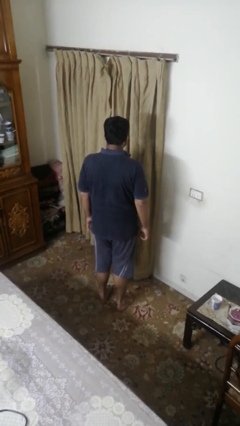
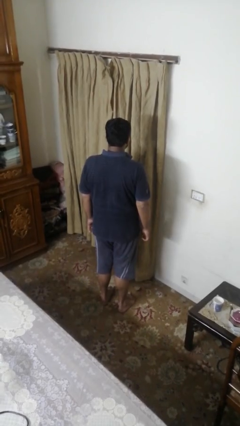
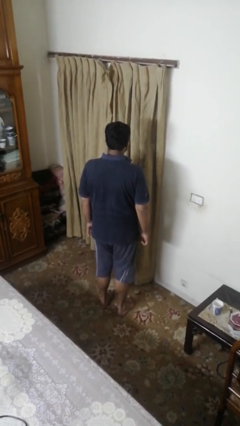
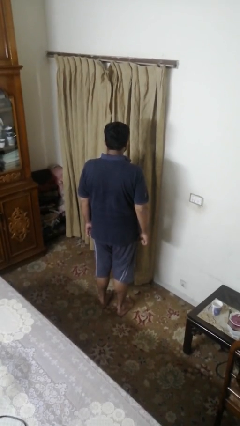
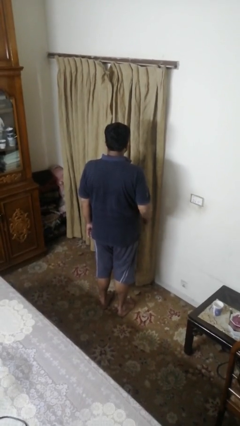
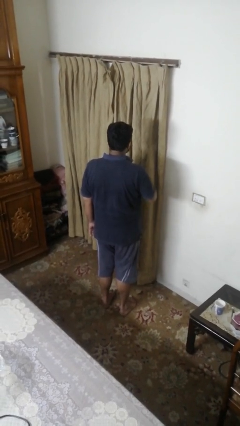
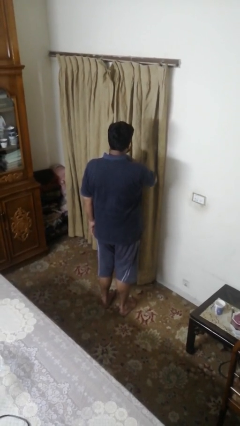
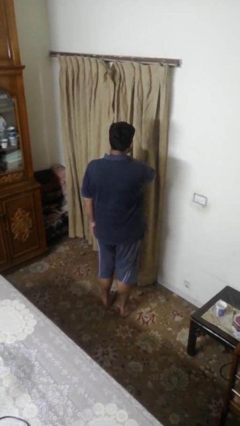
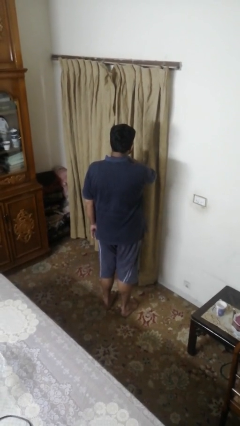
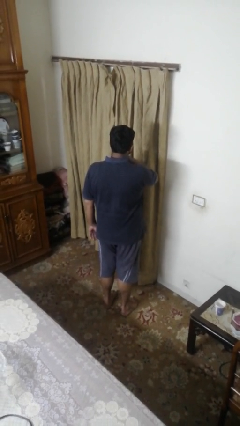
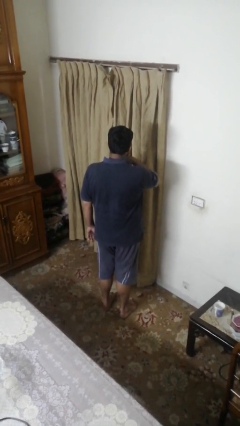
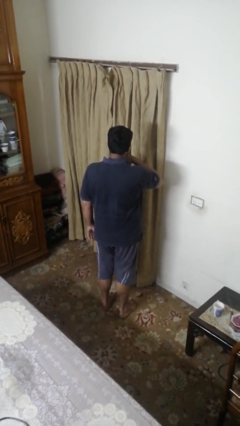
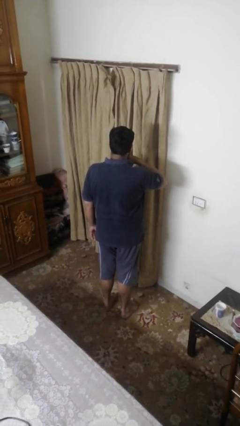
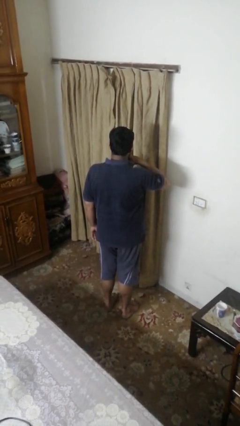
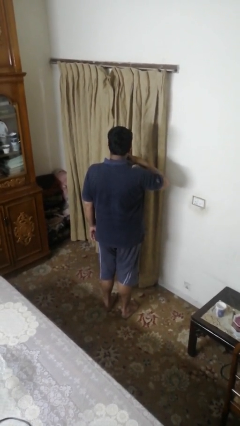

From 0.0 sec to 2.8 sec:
person gestures cut

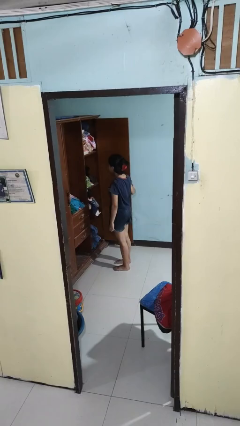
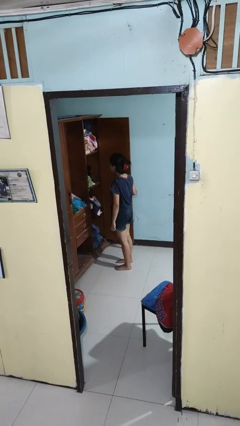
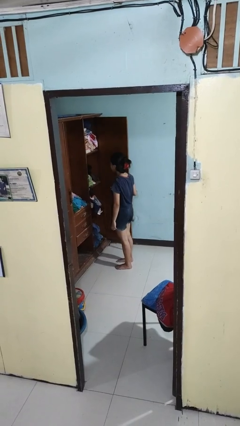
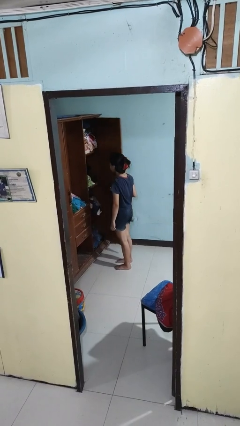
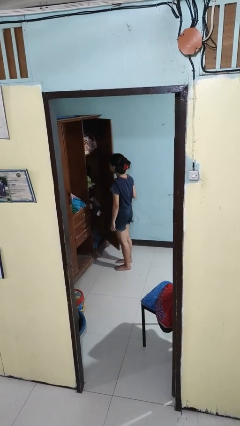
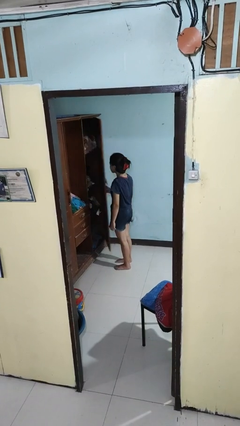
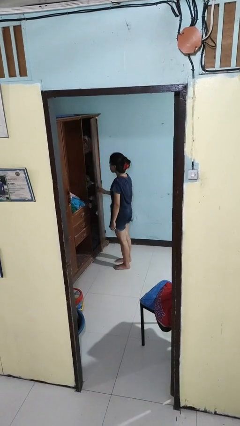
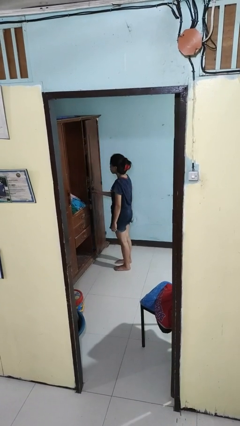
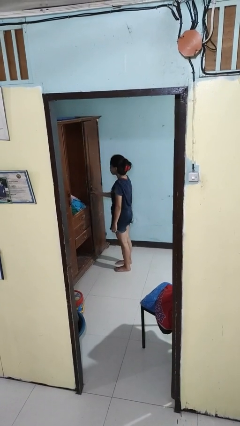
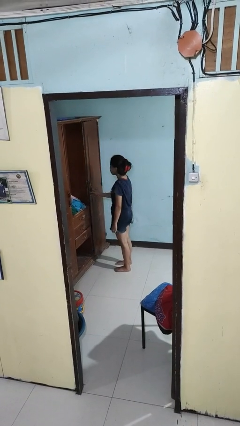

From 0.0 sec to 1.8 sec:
person closes closet door

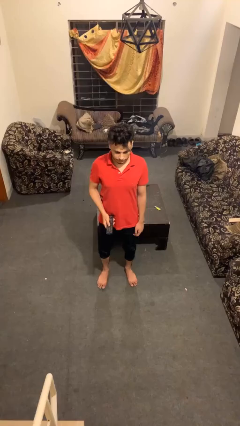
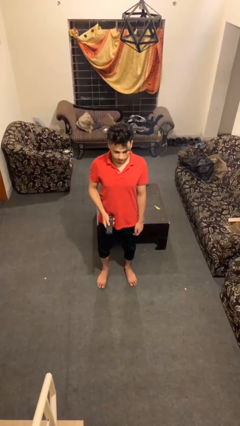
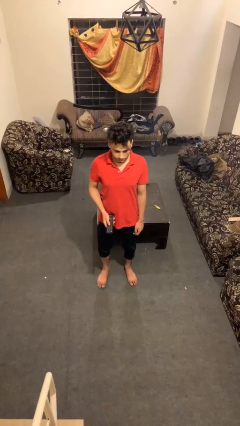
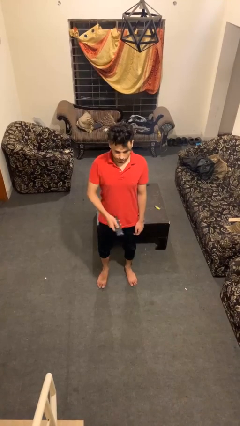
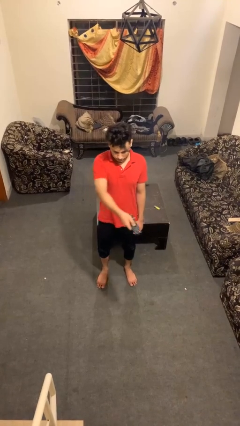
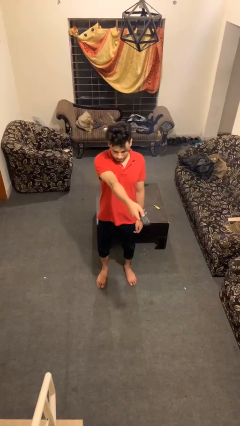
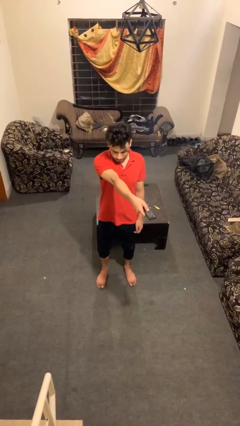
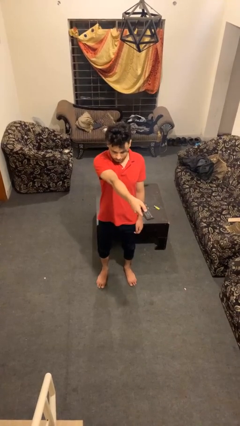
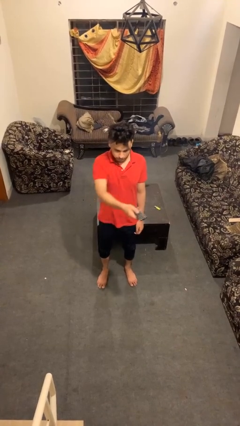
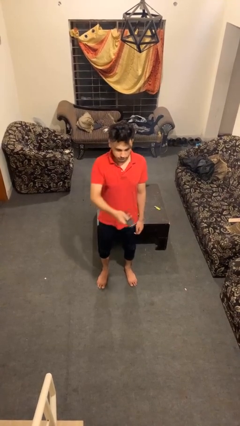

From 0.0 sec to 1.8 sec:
person uses television remote

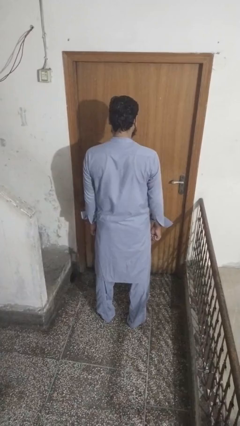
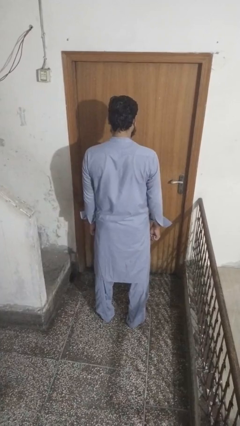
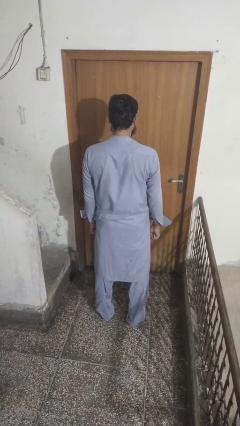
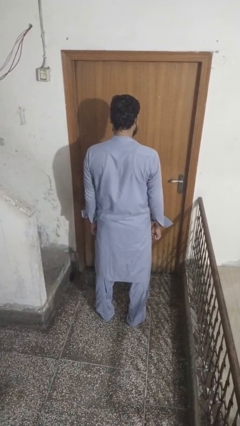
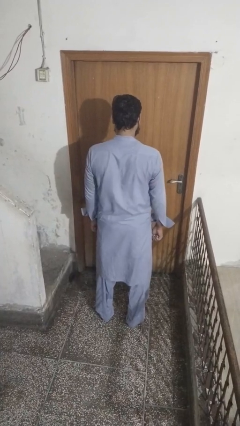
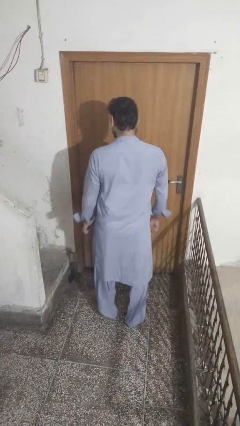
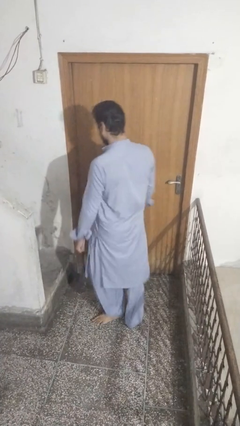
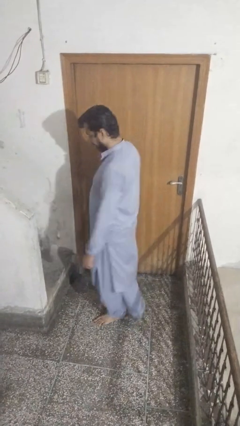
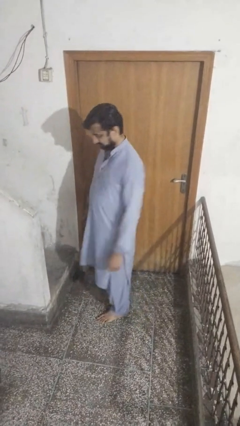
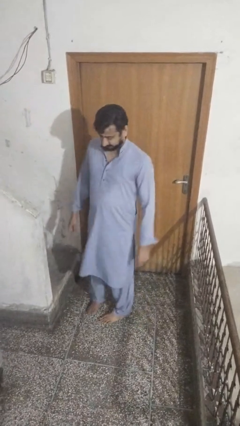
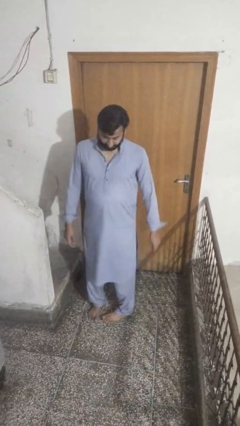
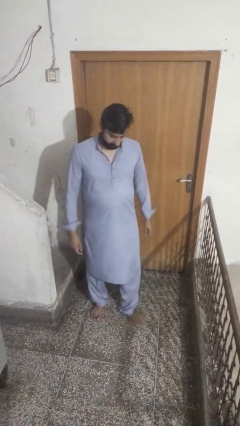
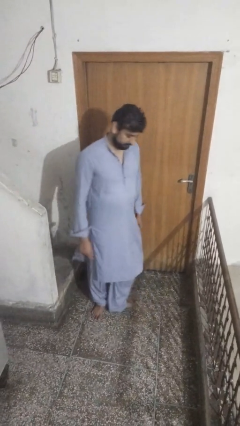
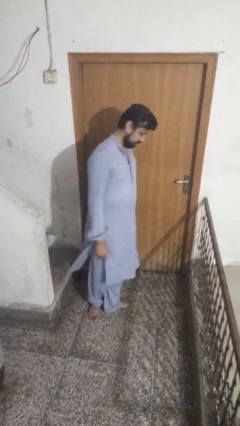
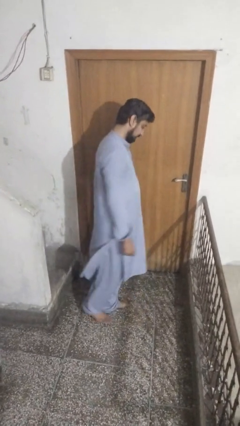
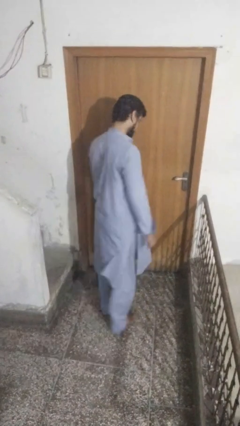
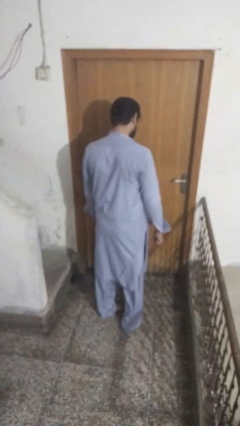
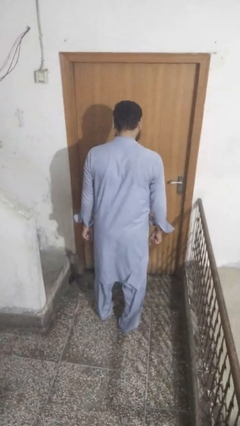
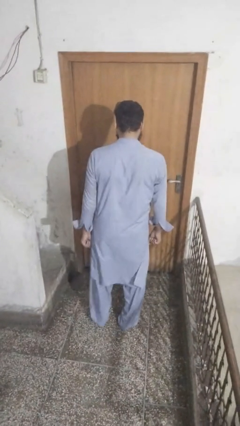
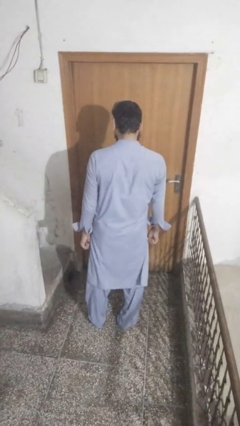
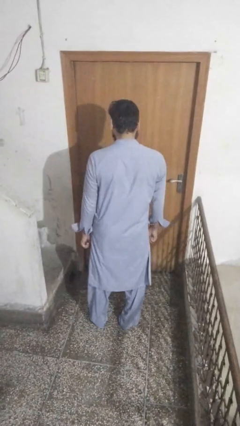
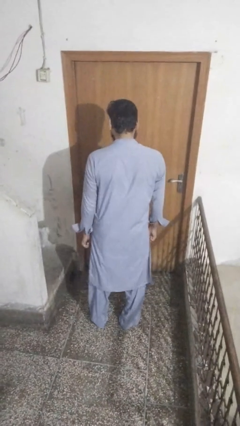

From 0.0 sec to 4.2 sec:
person twirls

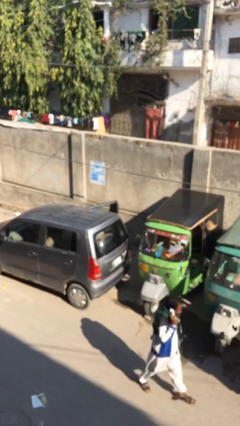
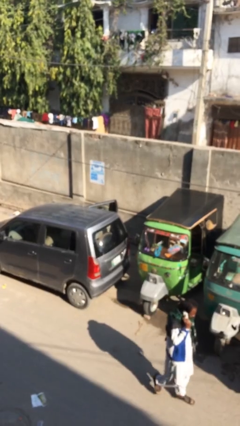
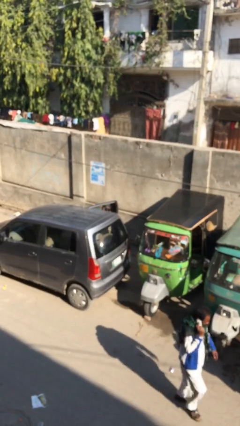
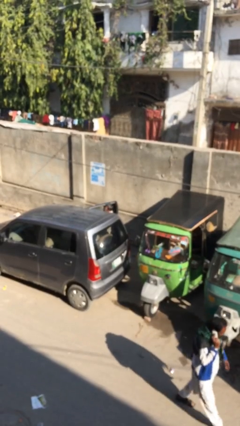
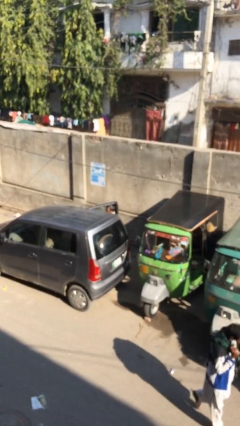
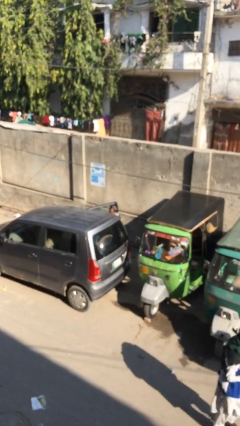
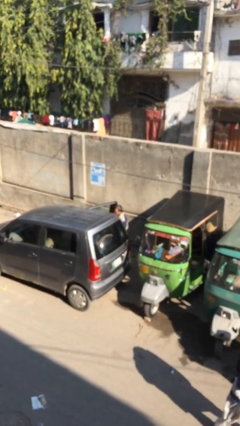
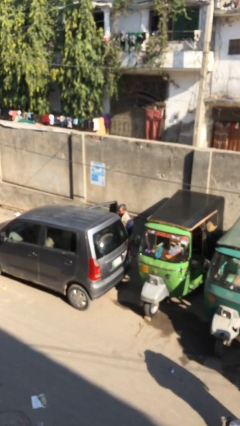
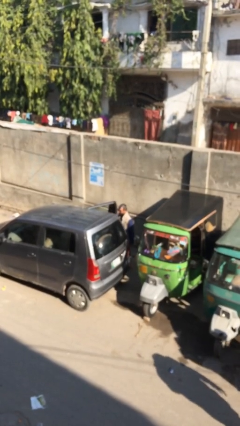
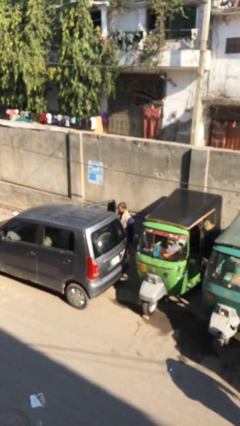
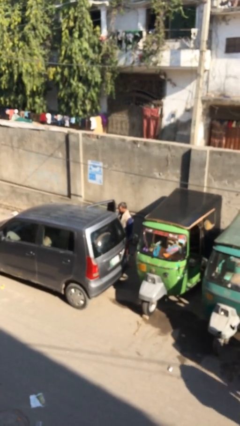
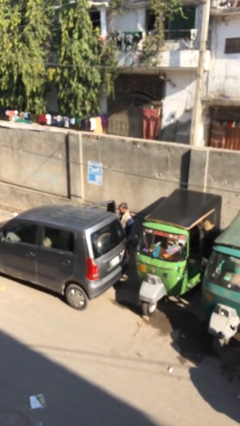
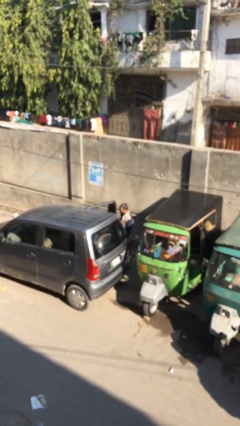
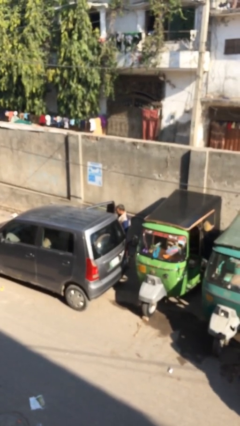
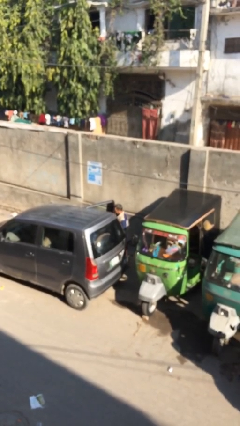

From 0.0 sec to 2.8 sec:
person exits car

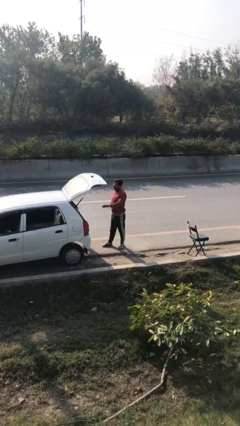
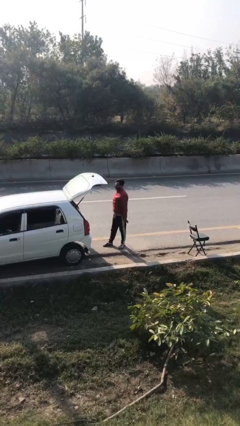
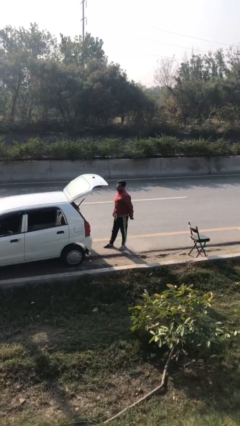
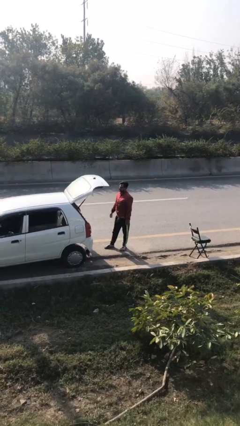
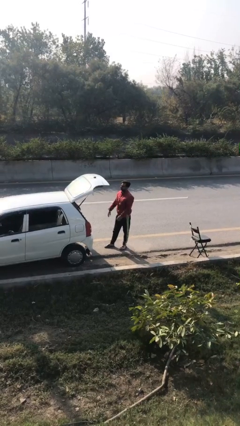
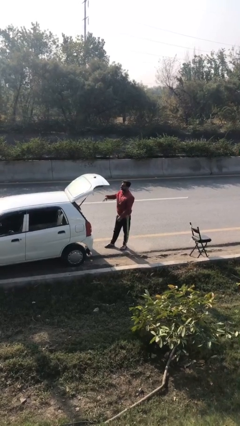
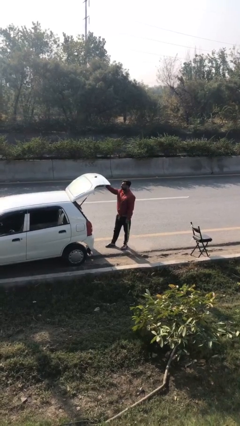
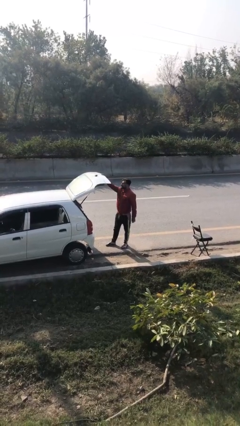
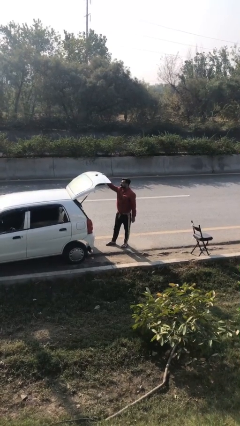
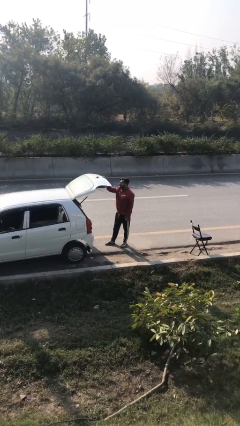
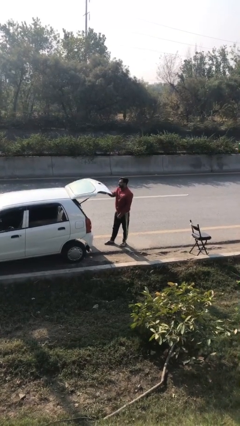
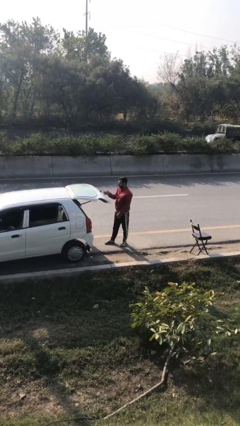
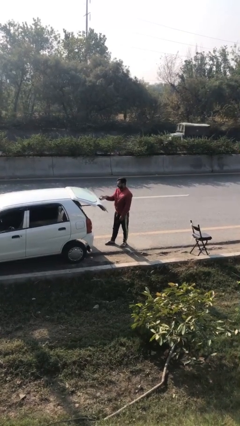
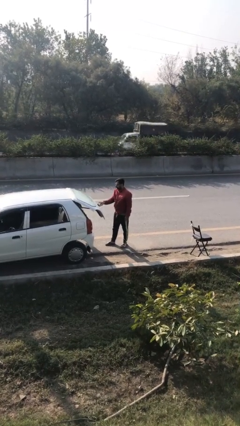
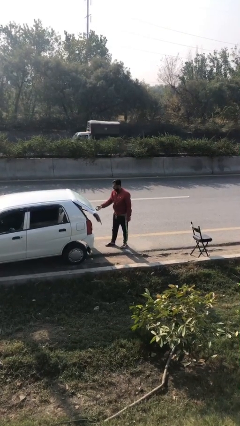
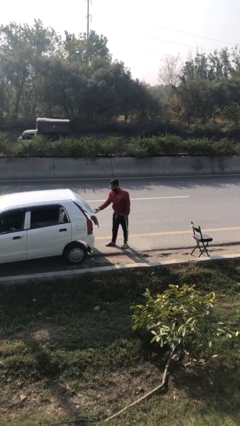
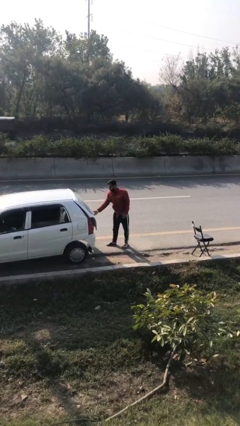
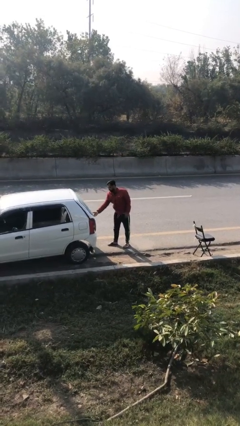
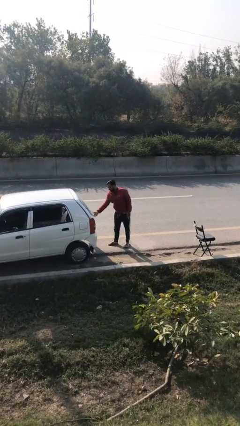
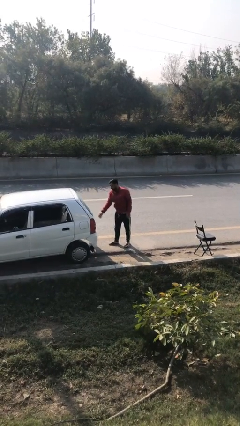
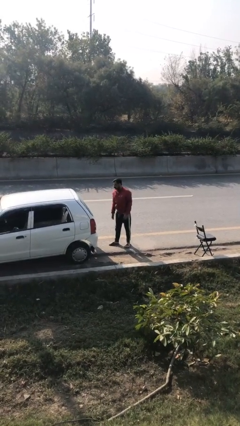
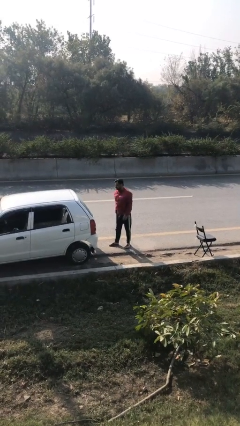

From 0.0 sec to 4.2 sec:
person closes car trunk
